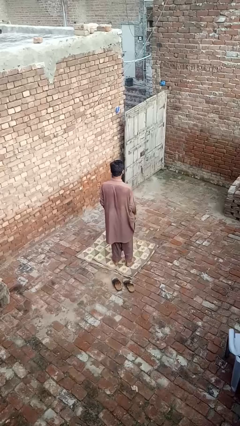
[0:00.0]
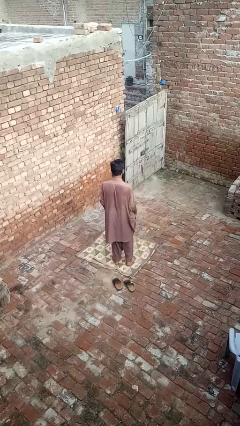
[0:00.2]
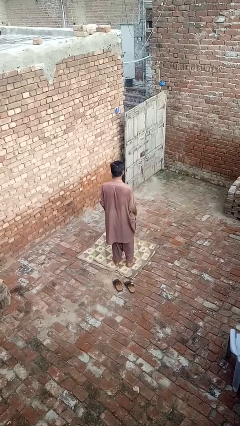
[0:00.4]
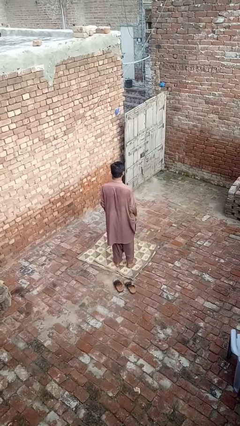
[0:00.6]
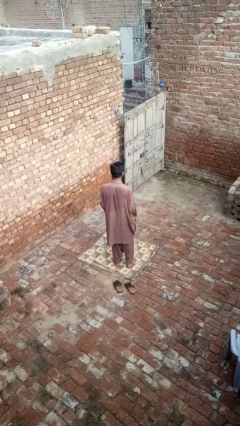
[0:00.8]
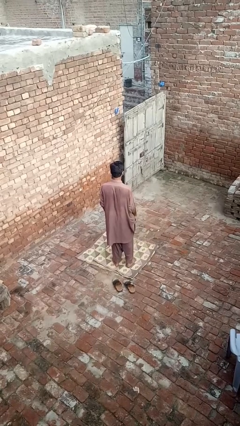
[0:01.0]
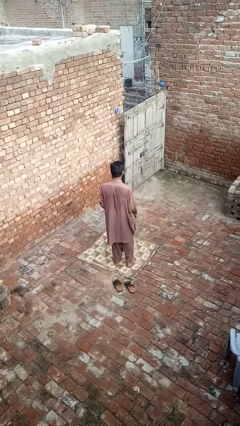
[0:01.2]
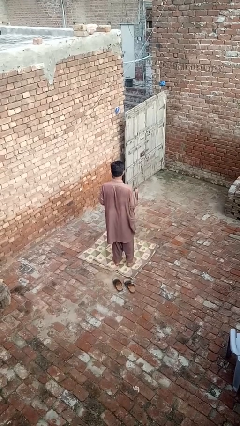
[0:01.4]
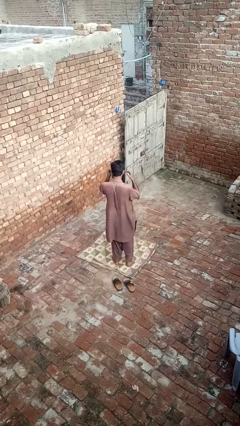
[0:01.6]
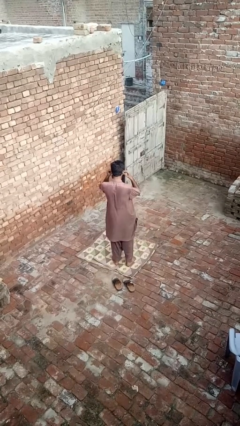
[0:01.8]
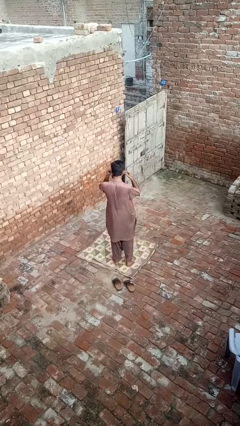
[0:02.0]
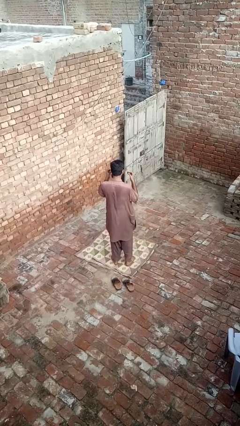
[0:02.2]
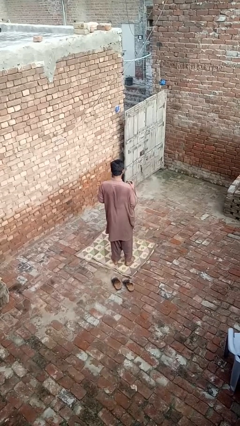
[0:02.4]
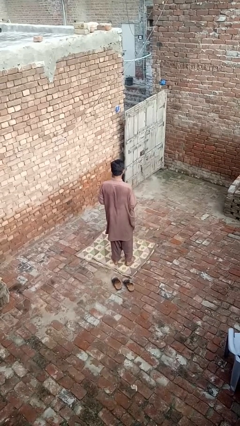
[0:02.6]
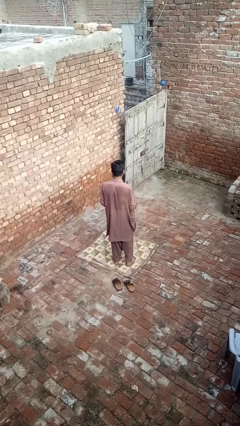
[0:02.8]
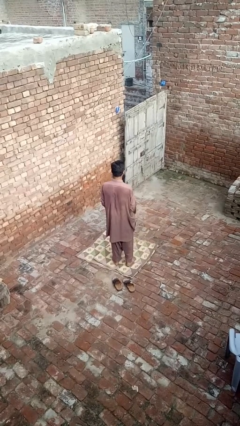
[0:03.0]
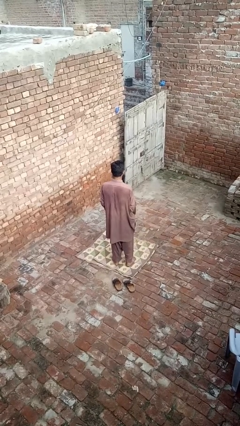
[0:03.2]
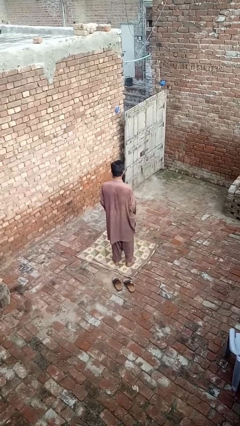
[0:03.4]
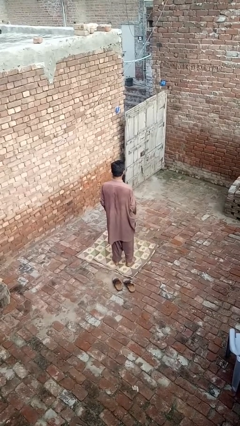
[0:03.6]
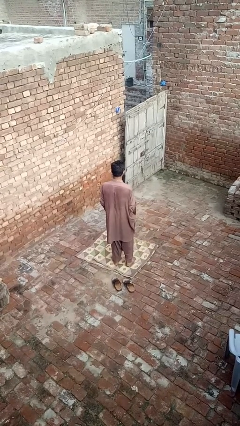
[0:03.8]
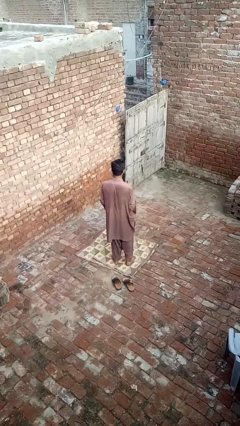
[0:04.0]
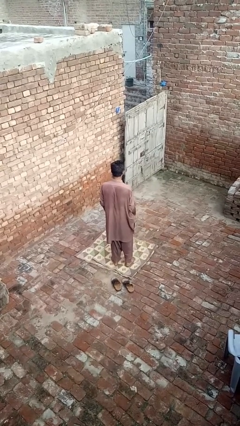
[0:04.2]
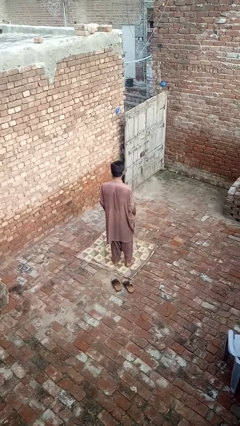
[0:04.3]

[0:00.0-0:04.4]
person takes off headphones

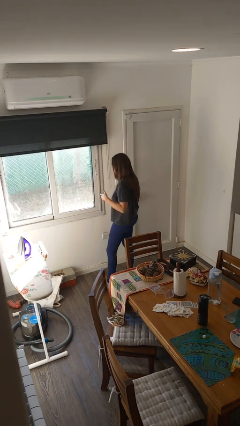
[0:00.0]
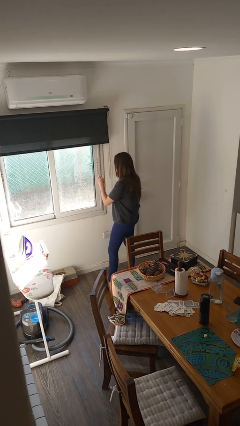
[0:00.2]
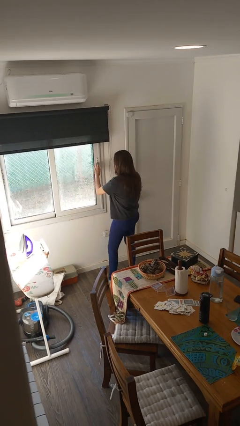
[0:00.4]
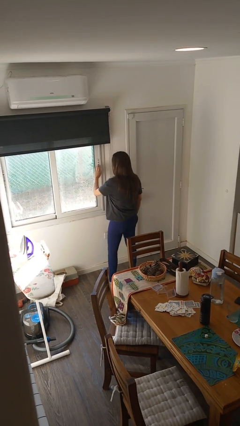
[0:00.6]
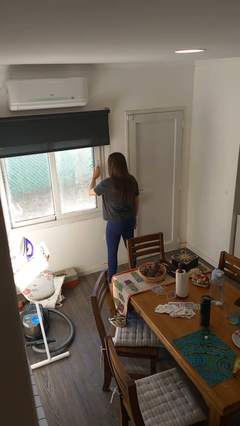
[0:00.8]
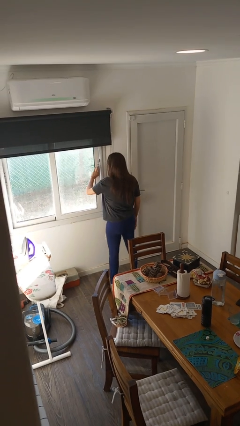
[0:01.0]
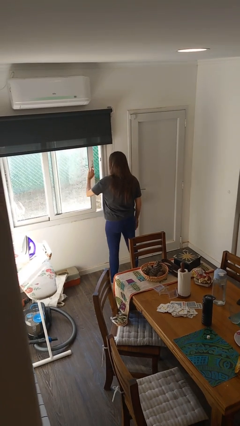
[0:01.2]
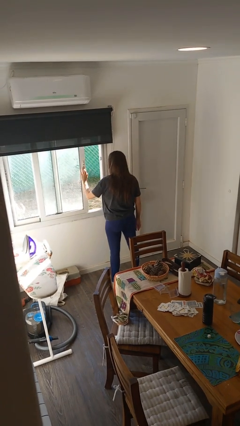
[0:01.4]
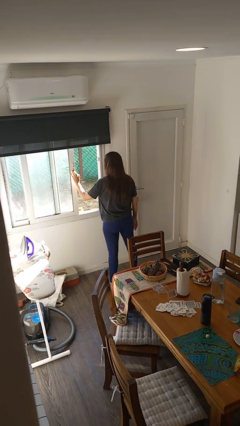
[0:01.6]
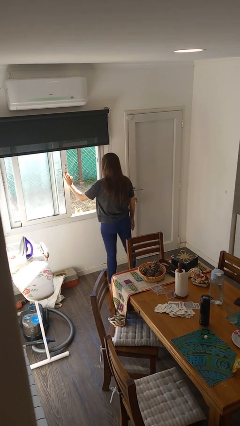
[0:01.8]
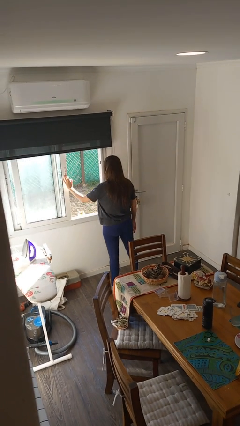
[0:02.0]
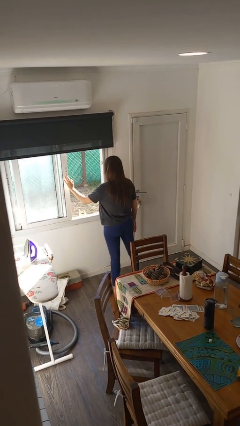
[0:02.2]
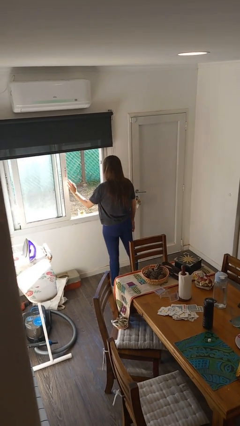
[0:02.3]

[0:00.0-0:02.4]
person opens home window

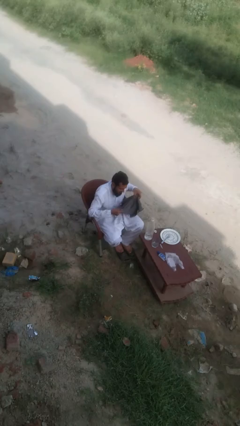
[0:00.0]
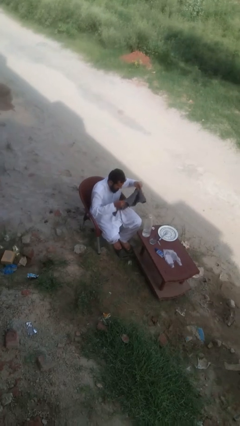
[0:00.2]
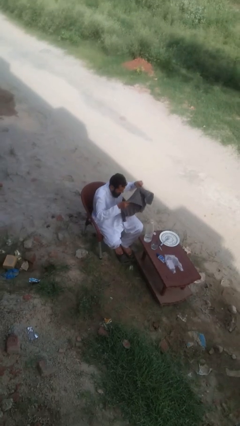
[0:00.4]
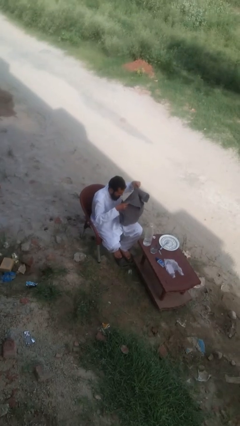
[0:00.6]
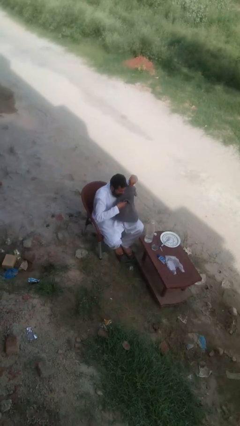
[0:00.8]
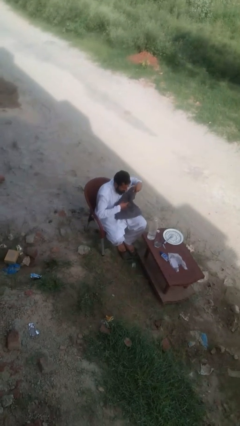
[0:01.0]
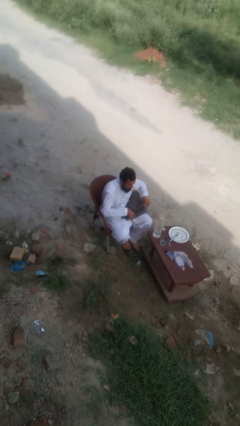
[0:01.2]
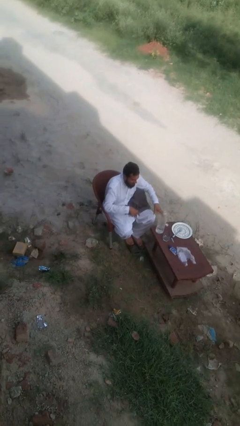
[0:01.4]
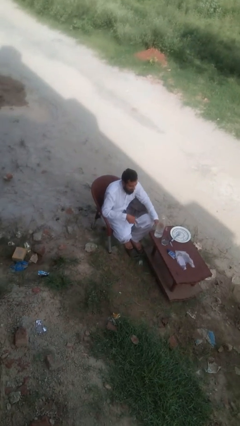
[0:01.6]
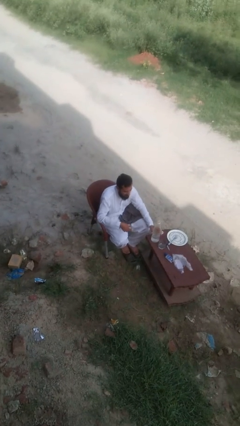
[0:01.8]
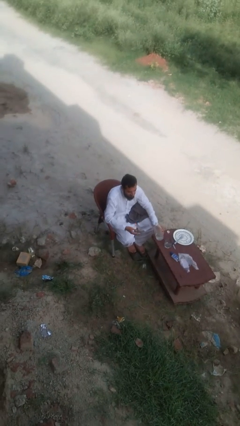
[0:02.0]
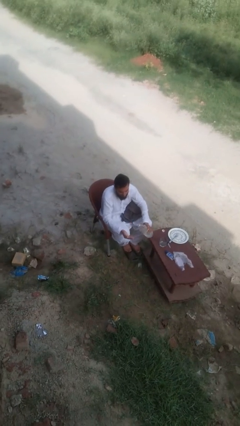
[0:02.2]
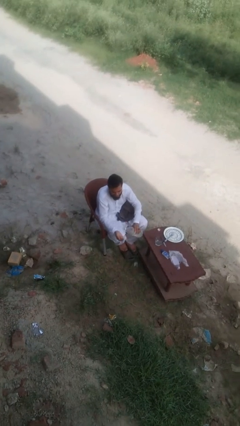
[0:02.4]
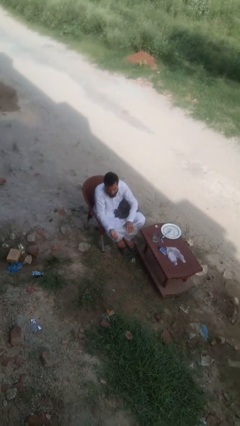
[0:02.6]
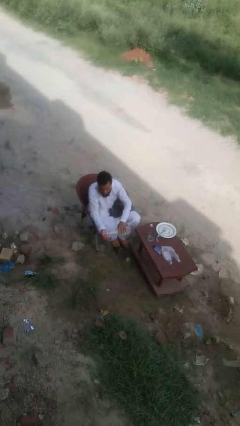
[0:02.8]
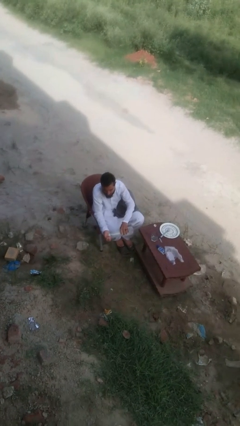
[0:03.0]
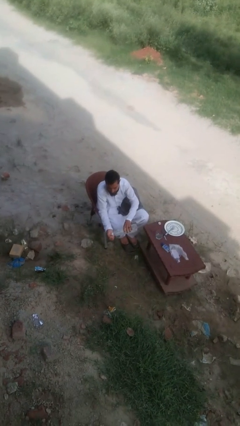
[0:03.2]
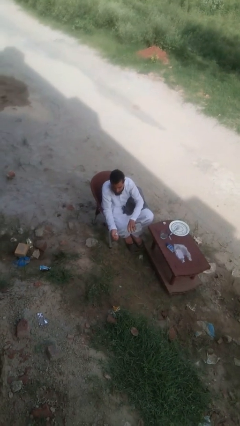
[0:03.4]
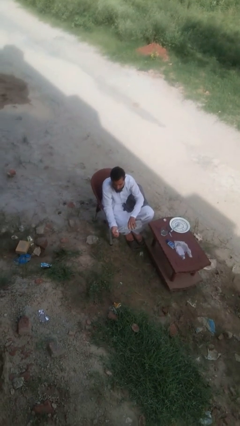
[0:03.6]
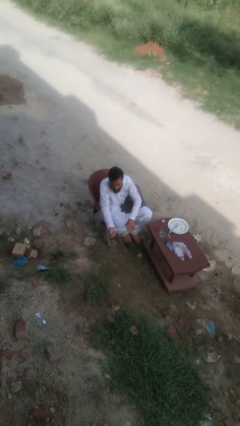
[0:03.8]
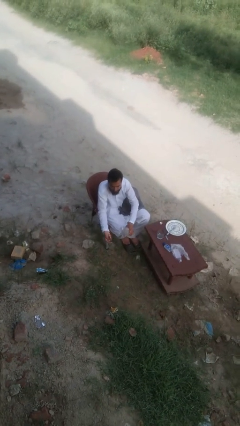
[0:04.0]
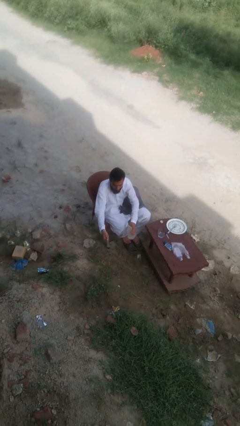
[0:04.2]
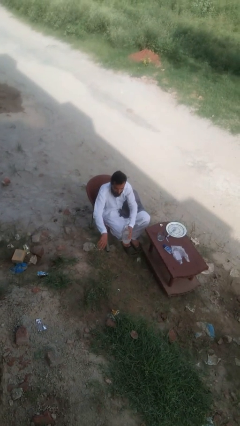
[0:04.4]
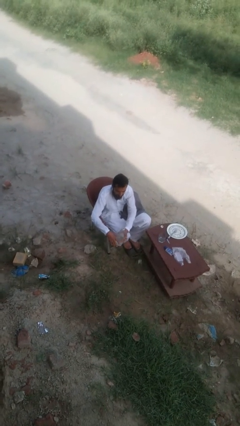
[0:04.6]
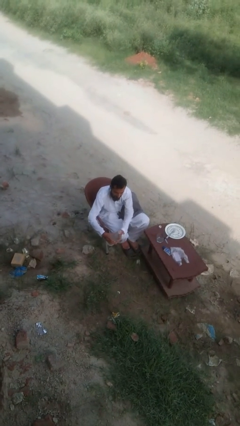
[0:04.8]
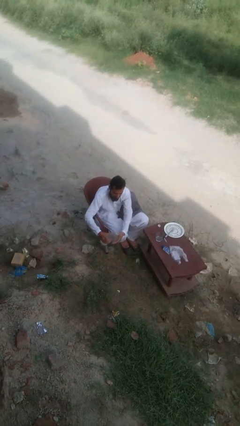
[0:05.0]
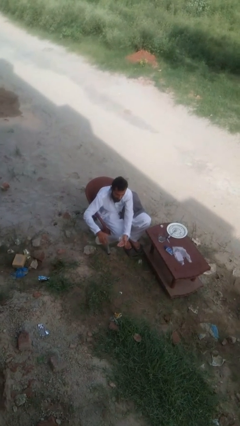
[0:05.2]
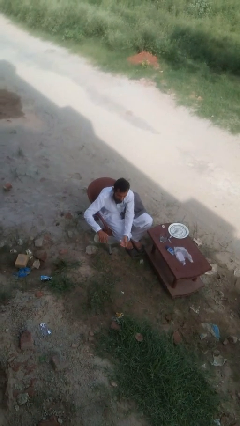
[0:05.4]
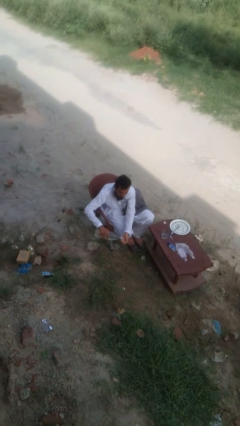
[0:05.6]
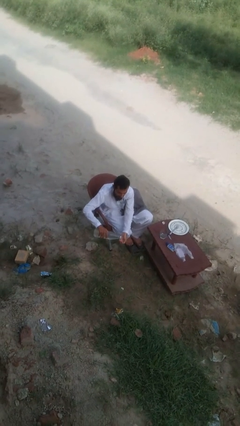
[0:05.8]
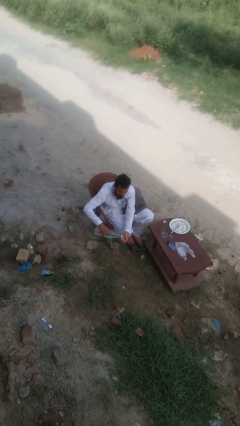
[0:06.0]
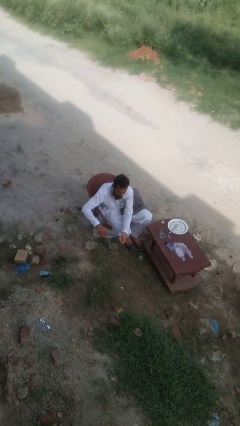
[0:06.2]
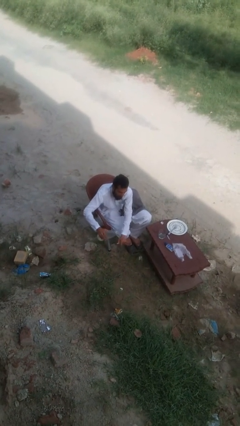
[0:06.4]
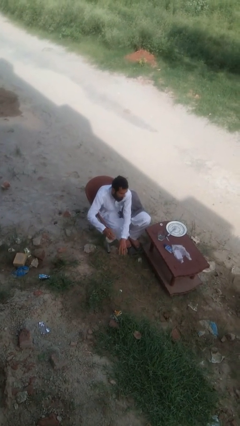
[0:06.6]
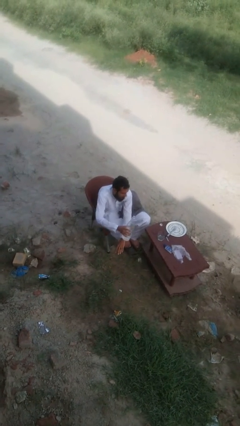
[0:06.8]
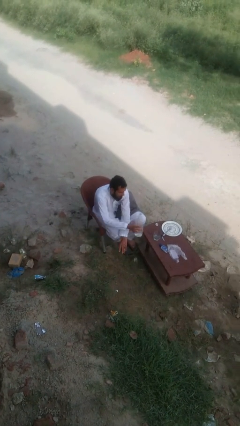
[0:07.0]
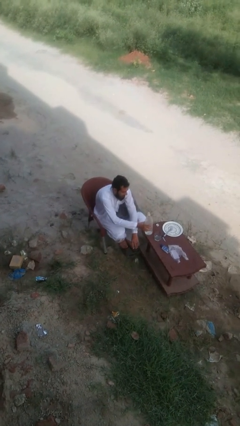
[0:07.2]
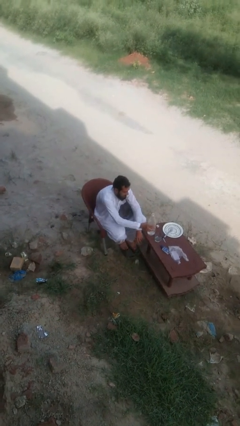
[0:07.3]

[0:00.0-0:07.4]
person washes hands

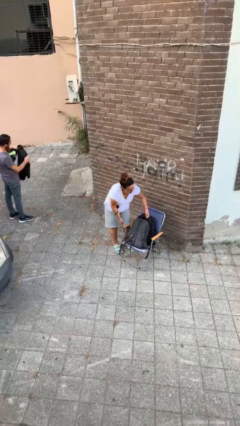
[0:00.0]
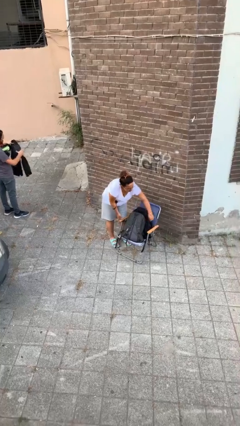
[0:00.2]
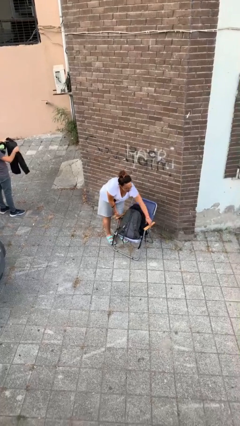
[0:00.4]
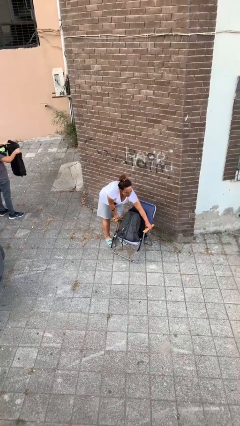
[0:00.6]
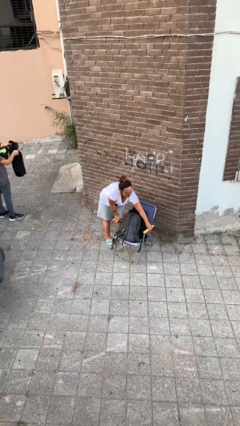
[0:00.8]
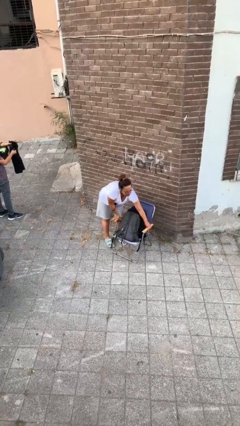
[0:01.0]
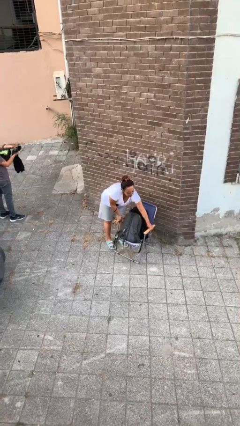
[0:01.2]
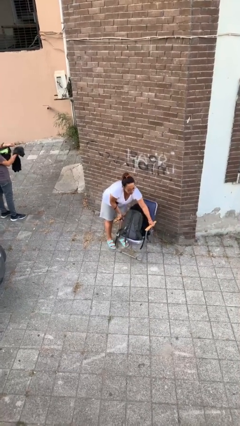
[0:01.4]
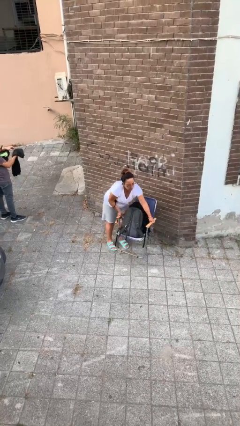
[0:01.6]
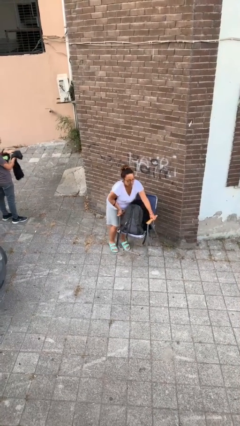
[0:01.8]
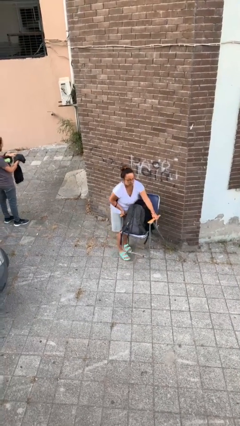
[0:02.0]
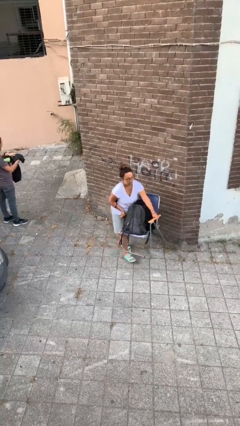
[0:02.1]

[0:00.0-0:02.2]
person picks up object from floor

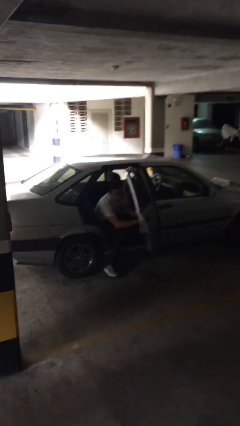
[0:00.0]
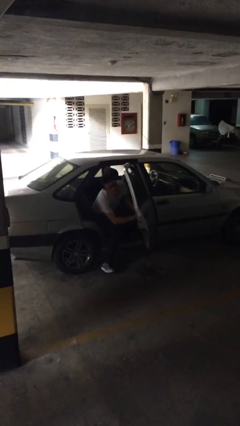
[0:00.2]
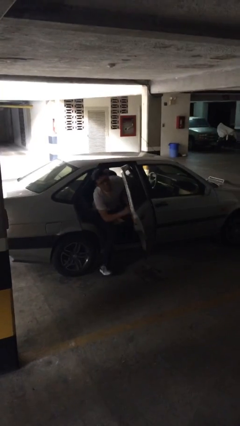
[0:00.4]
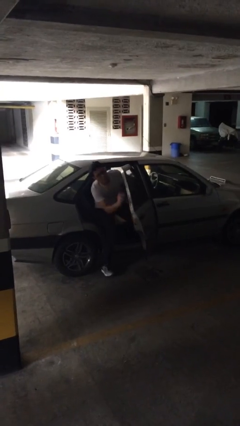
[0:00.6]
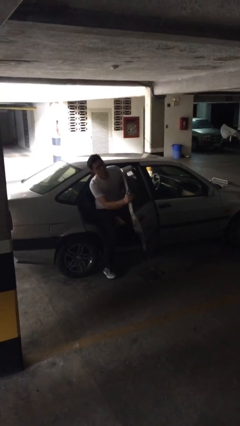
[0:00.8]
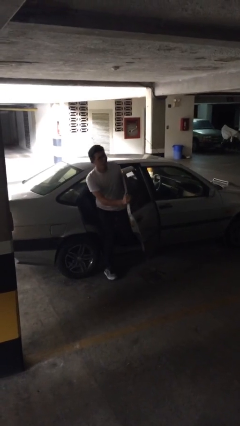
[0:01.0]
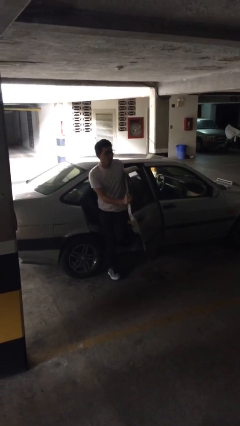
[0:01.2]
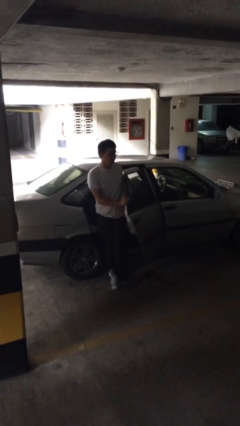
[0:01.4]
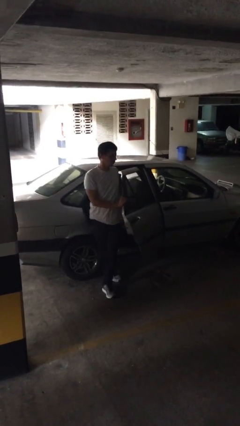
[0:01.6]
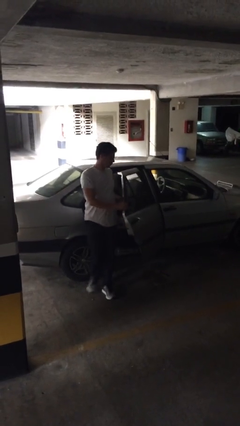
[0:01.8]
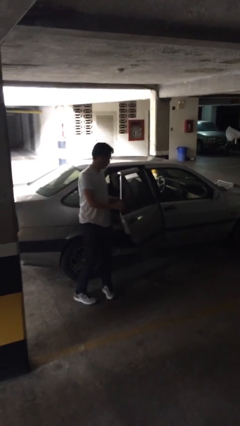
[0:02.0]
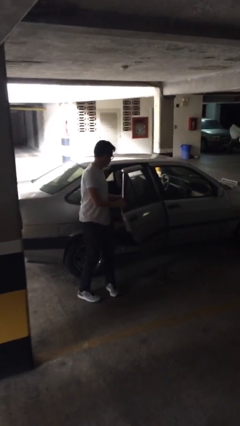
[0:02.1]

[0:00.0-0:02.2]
person exits car
